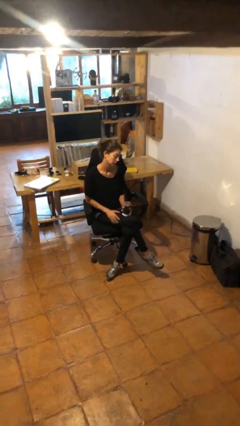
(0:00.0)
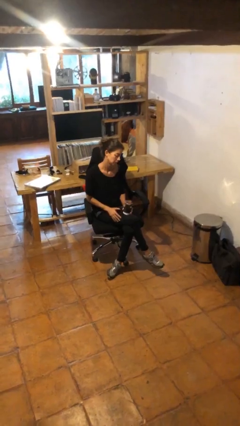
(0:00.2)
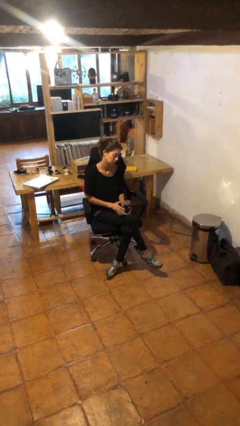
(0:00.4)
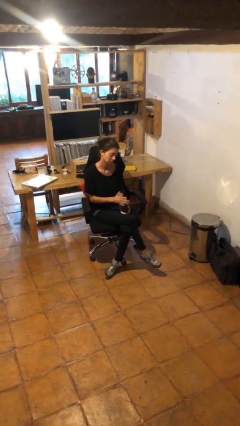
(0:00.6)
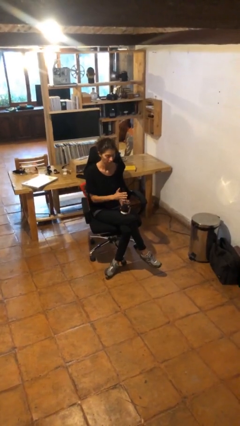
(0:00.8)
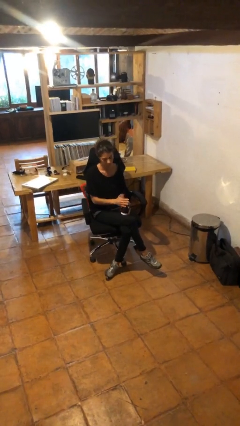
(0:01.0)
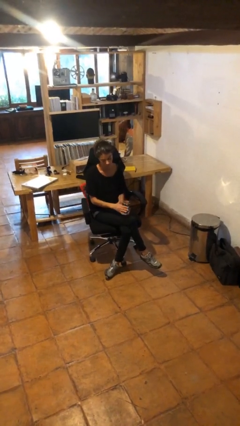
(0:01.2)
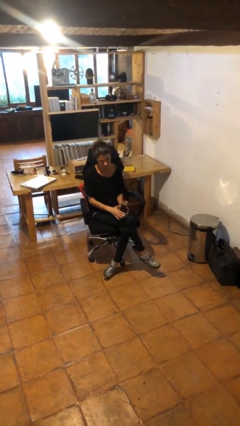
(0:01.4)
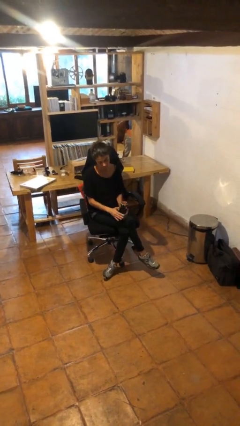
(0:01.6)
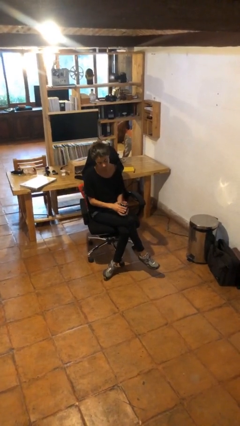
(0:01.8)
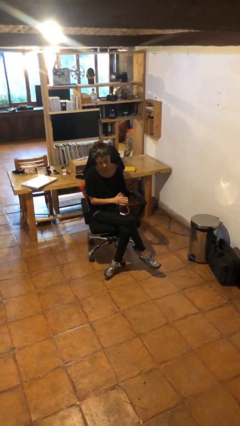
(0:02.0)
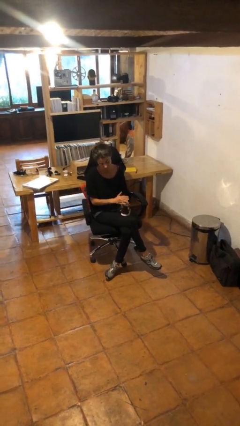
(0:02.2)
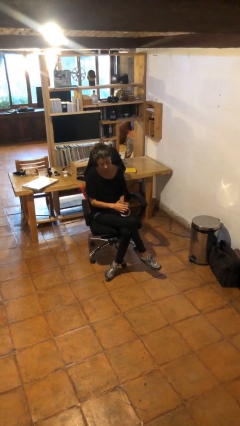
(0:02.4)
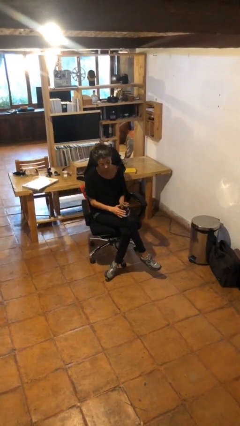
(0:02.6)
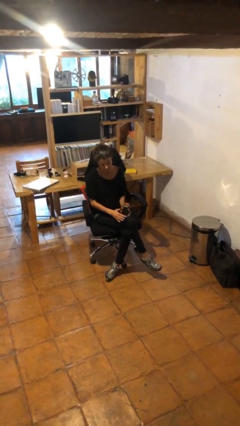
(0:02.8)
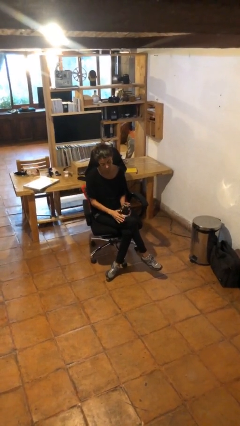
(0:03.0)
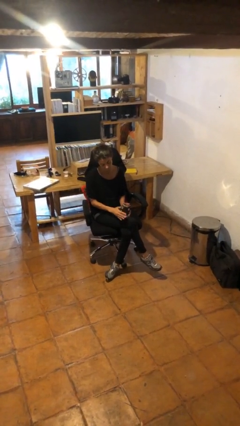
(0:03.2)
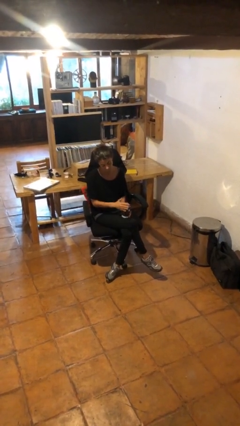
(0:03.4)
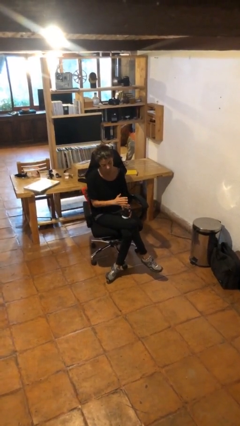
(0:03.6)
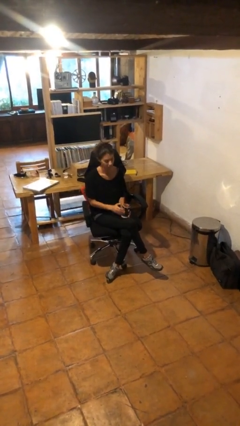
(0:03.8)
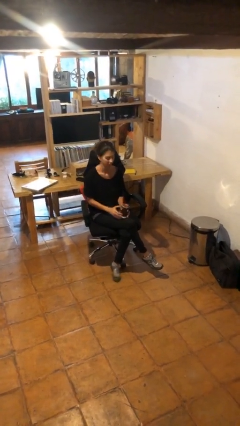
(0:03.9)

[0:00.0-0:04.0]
person waves hand over object

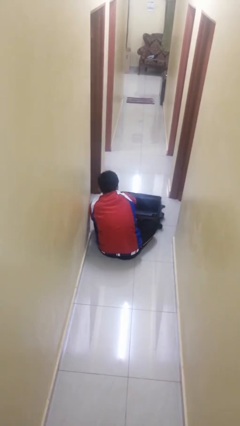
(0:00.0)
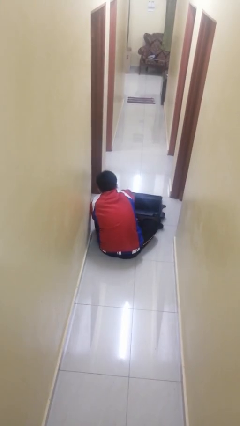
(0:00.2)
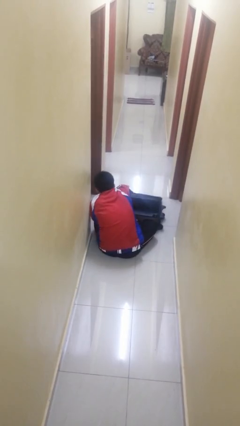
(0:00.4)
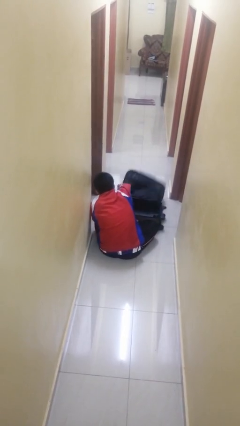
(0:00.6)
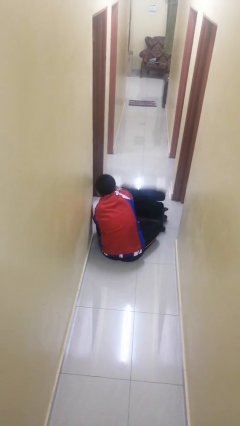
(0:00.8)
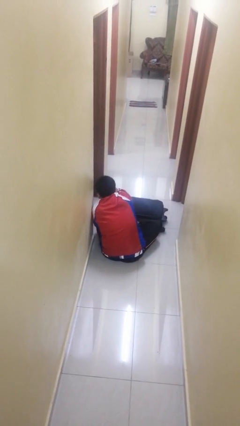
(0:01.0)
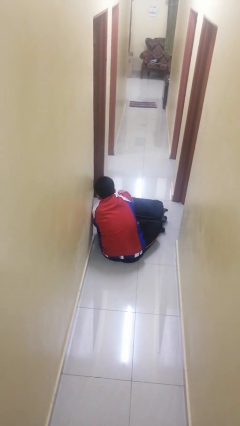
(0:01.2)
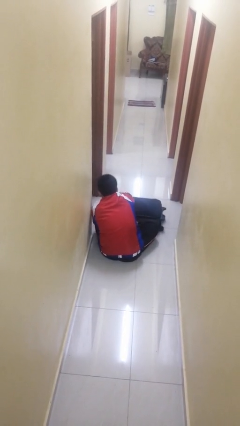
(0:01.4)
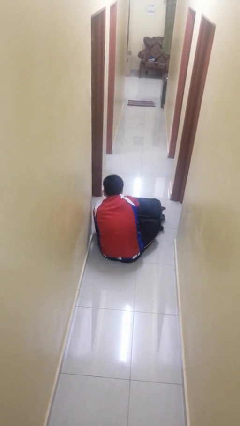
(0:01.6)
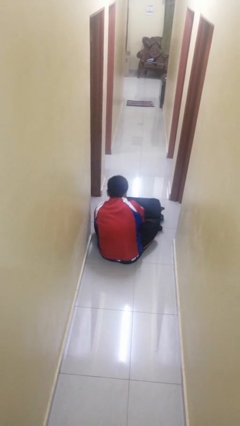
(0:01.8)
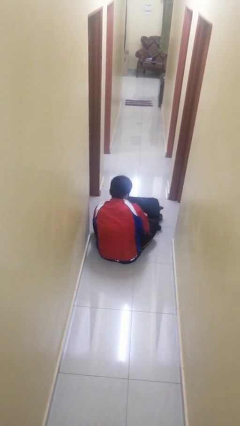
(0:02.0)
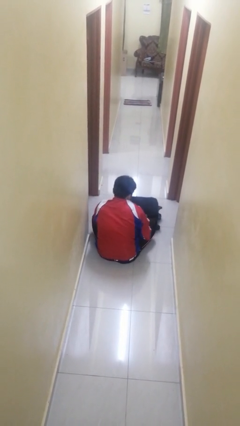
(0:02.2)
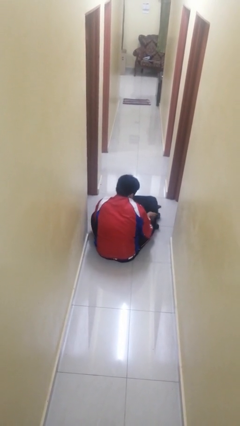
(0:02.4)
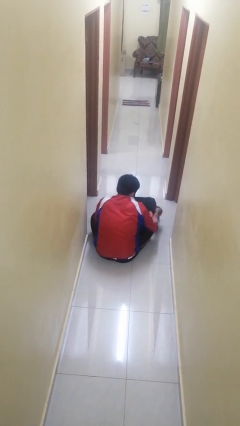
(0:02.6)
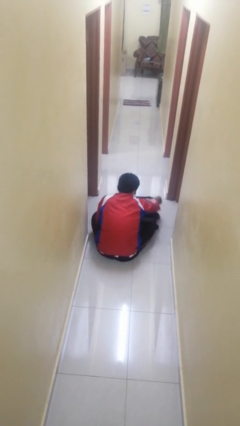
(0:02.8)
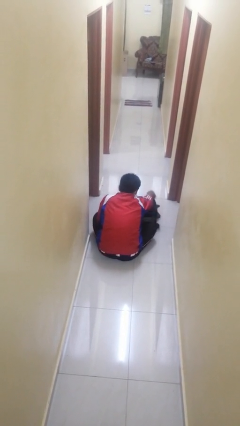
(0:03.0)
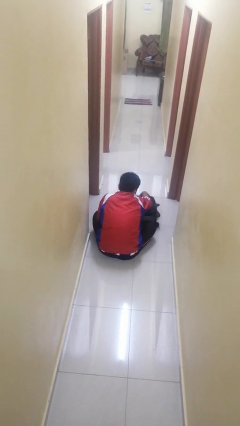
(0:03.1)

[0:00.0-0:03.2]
person closes suitcase

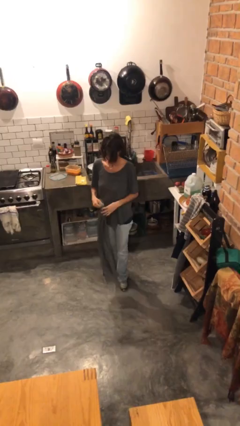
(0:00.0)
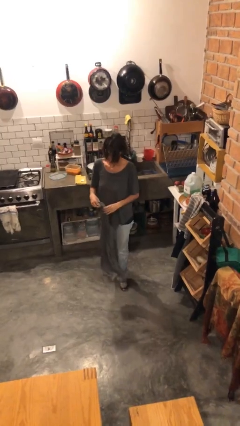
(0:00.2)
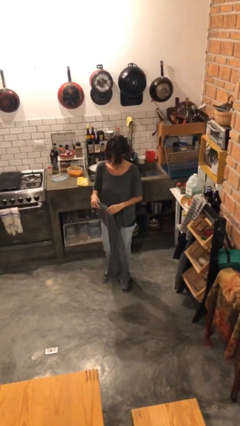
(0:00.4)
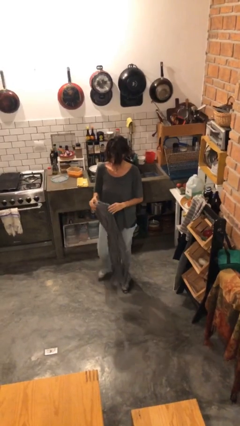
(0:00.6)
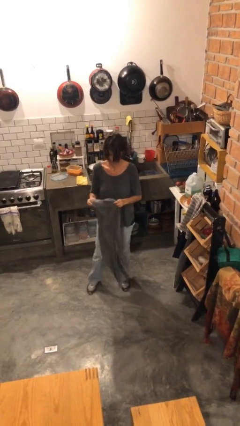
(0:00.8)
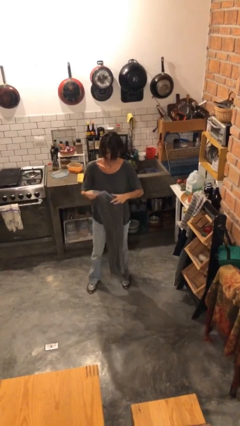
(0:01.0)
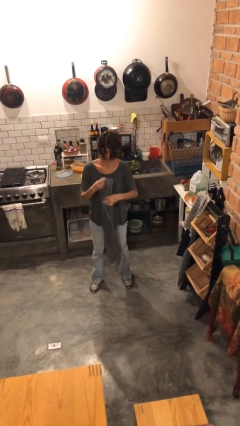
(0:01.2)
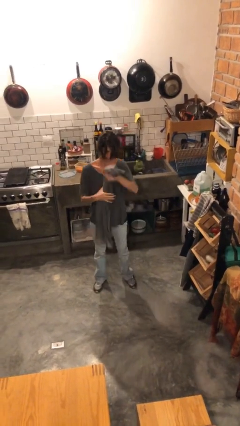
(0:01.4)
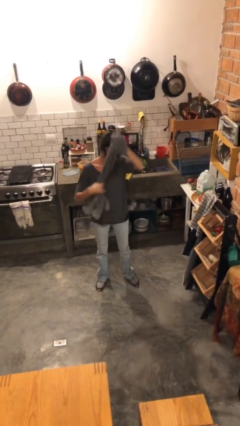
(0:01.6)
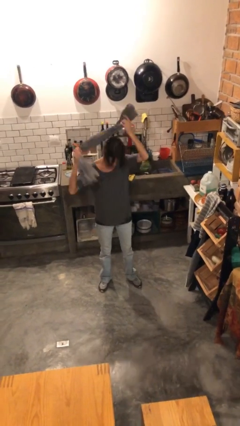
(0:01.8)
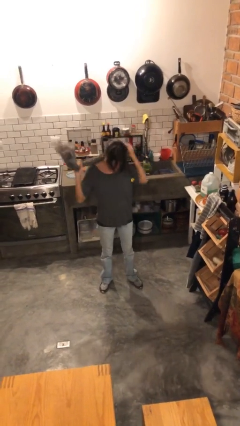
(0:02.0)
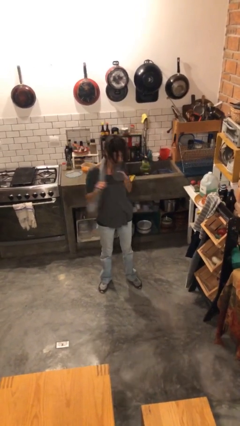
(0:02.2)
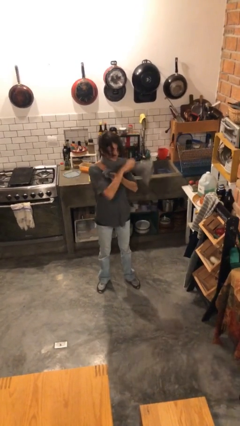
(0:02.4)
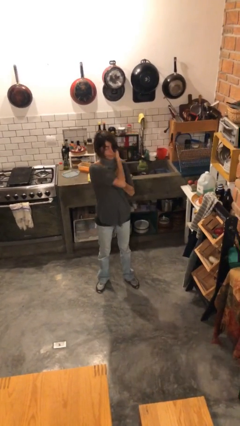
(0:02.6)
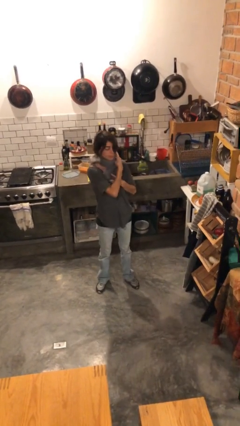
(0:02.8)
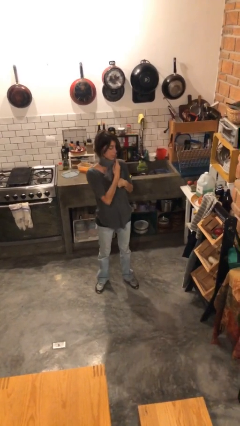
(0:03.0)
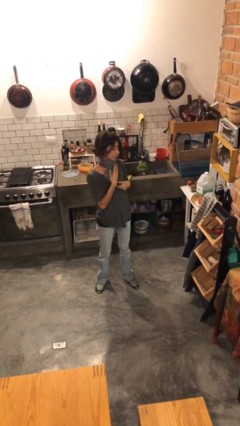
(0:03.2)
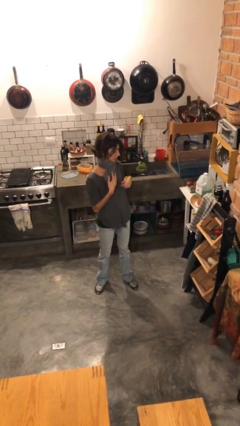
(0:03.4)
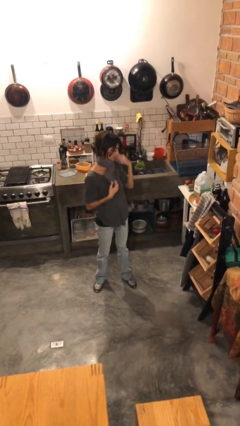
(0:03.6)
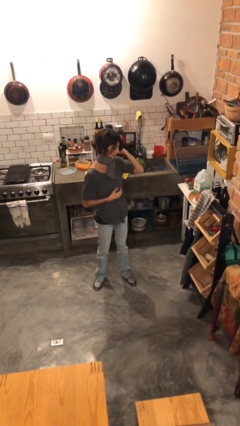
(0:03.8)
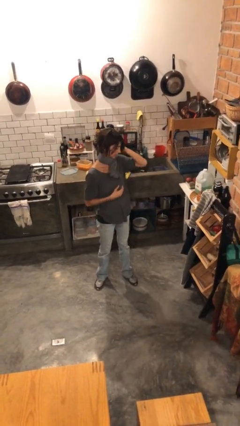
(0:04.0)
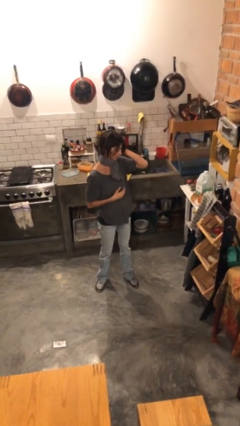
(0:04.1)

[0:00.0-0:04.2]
person puts on scarf

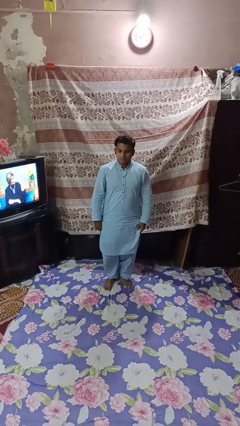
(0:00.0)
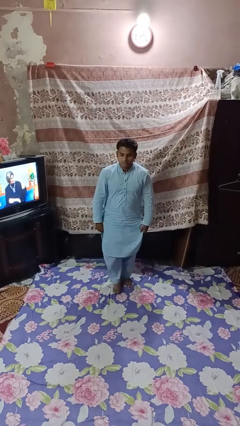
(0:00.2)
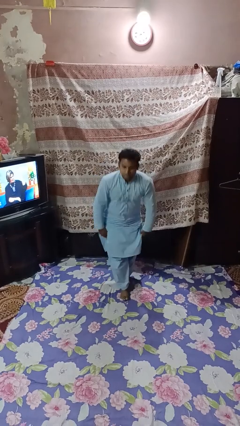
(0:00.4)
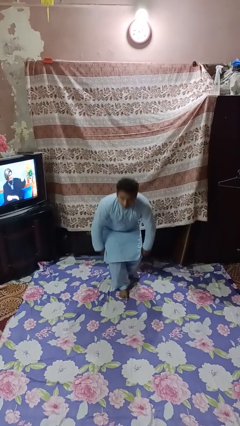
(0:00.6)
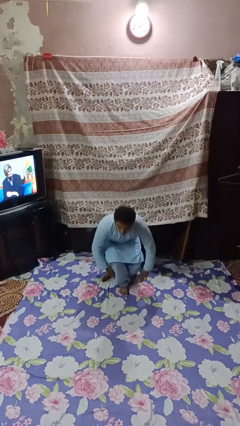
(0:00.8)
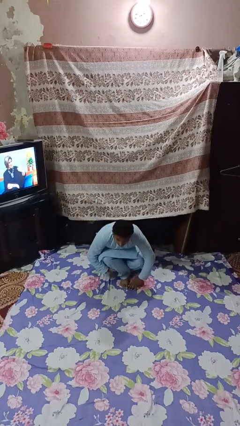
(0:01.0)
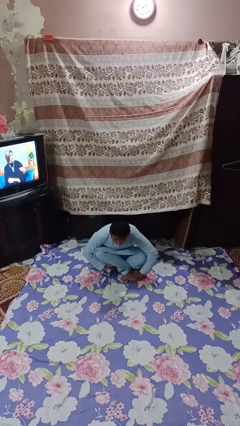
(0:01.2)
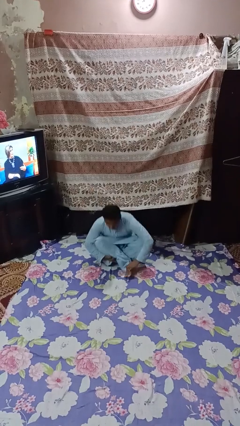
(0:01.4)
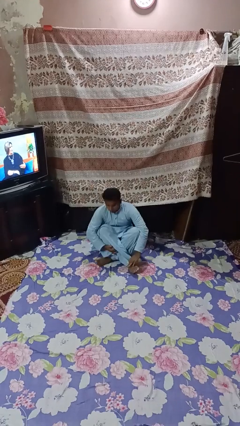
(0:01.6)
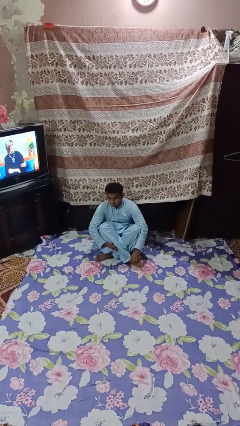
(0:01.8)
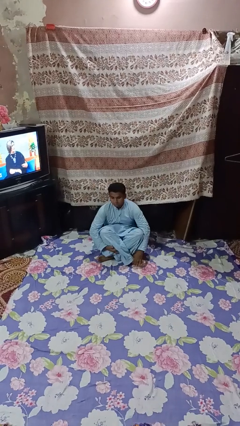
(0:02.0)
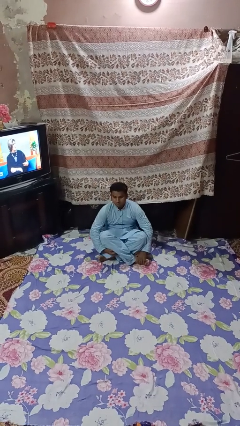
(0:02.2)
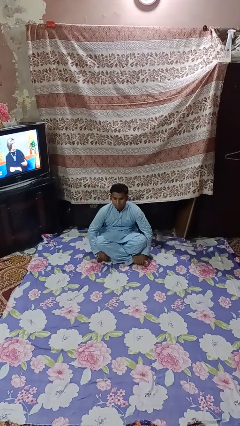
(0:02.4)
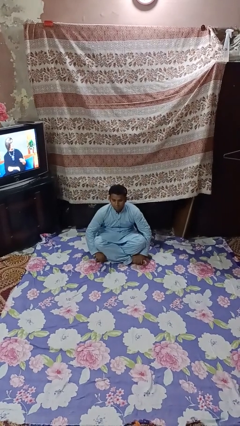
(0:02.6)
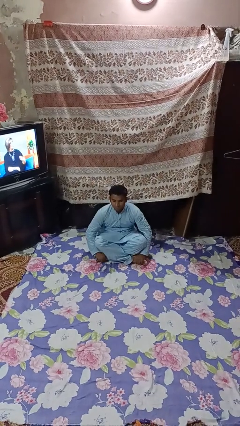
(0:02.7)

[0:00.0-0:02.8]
person sits crisscross

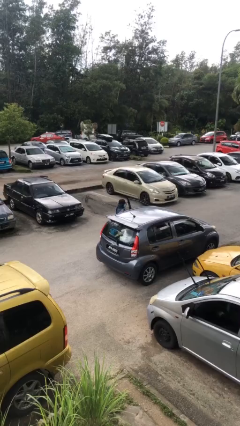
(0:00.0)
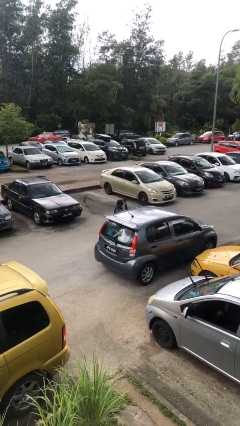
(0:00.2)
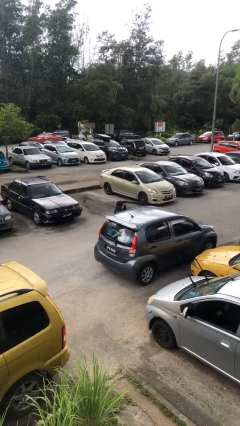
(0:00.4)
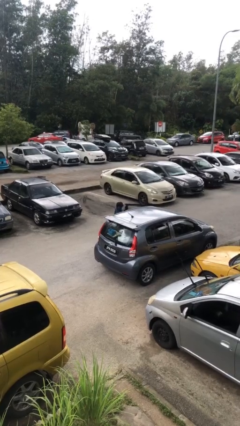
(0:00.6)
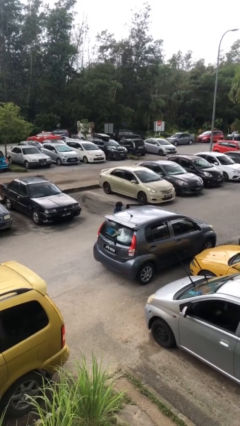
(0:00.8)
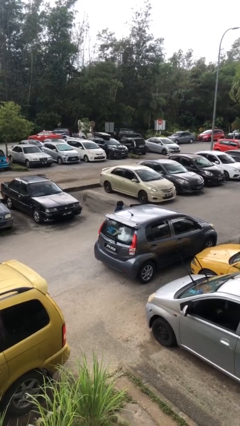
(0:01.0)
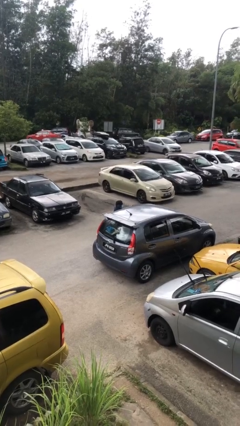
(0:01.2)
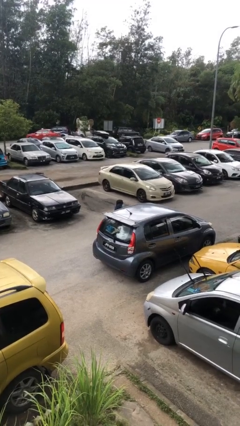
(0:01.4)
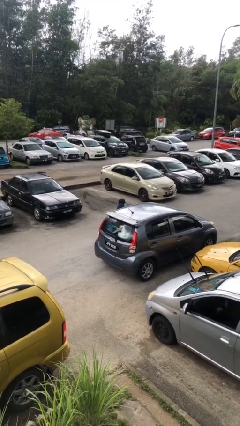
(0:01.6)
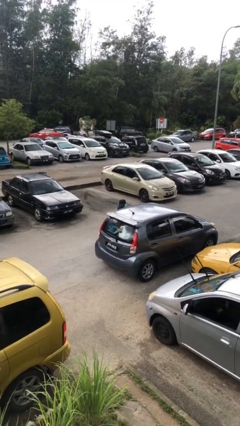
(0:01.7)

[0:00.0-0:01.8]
person closes car door

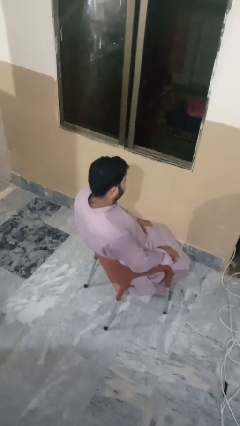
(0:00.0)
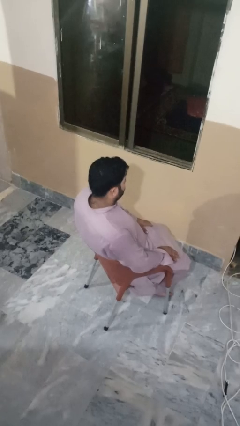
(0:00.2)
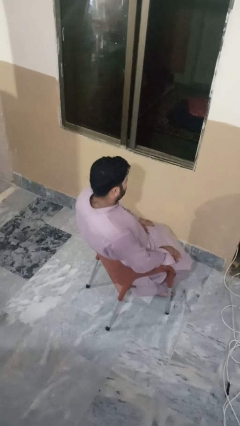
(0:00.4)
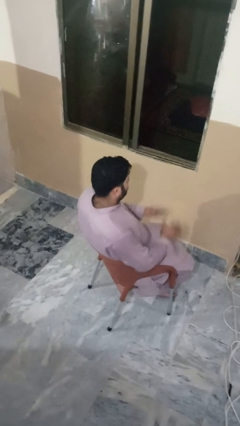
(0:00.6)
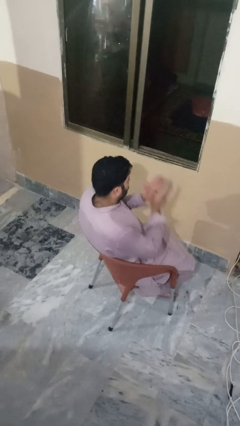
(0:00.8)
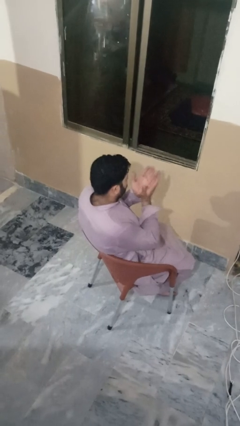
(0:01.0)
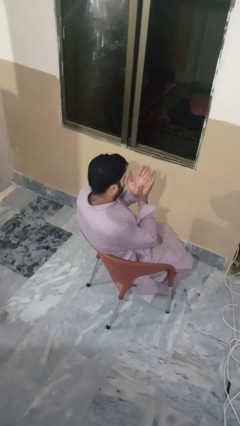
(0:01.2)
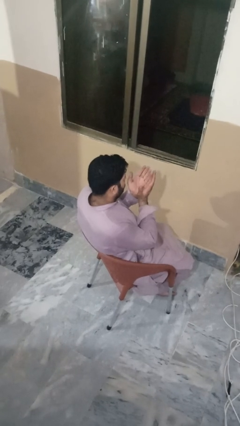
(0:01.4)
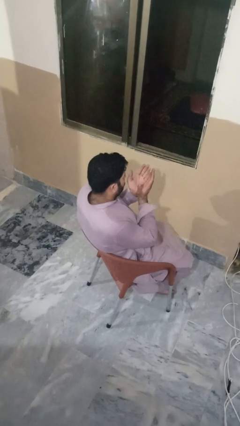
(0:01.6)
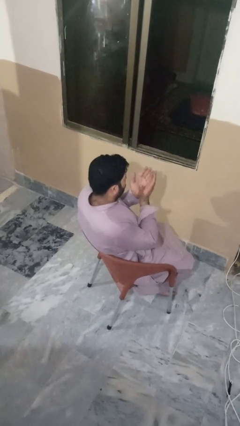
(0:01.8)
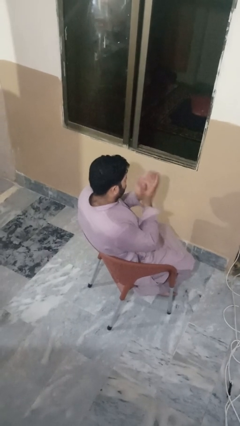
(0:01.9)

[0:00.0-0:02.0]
person prays
